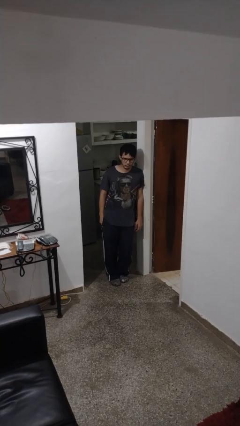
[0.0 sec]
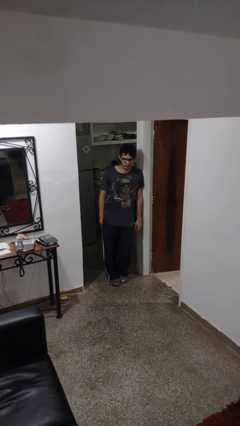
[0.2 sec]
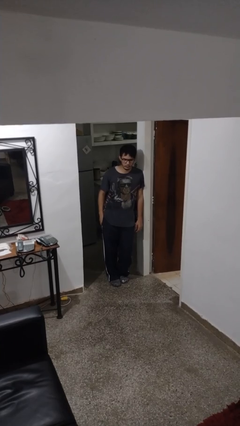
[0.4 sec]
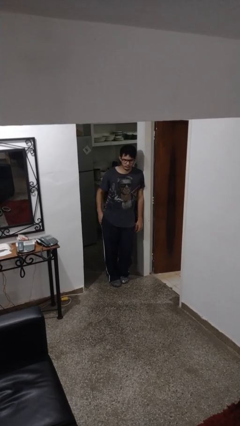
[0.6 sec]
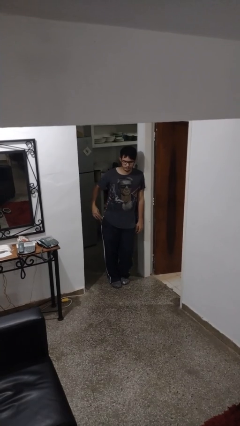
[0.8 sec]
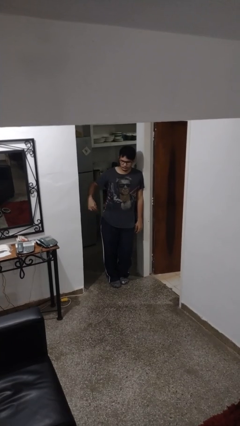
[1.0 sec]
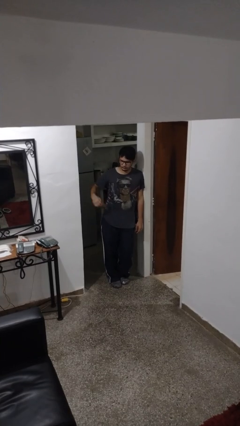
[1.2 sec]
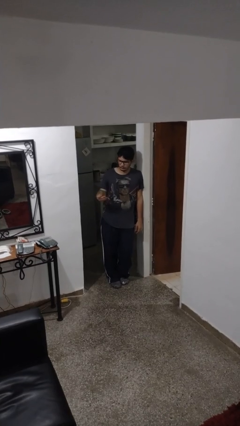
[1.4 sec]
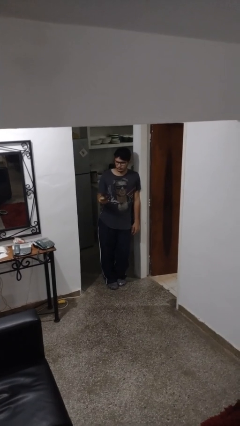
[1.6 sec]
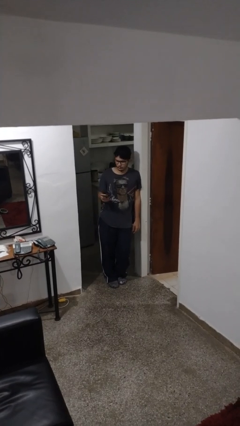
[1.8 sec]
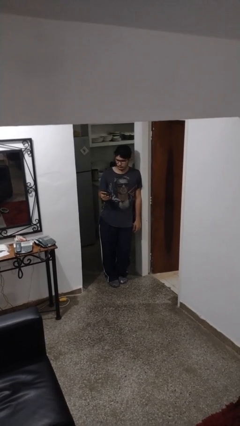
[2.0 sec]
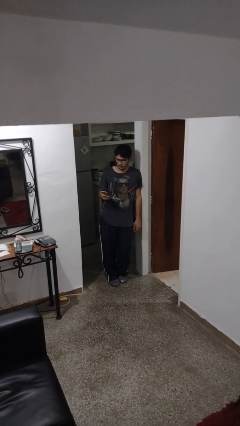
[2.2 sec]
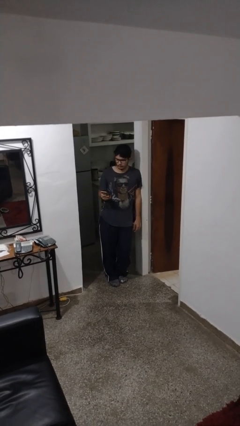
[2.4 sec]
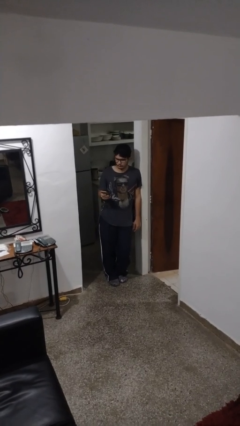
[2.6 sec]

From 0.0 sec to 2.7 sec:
person takes phone from pocket

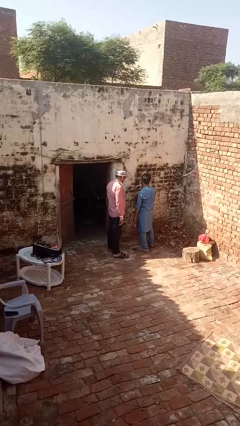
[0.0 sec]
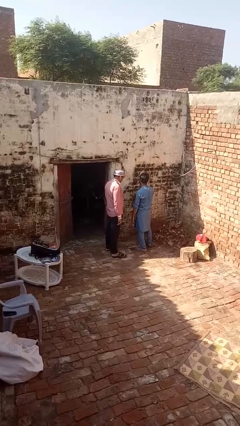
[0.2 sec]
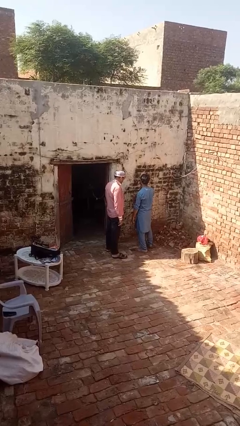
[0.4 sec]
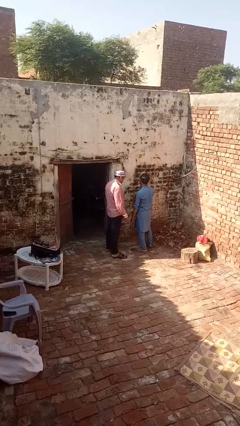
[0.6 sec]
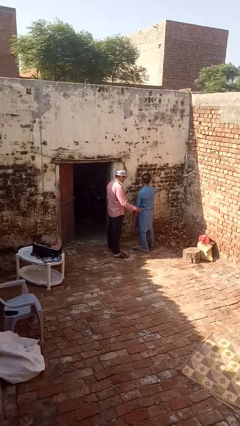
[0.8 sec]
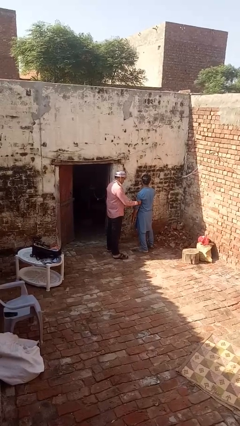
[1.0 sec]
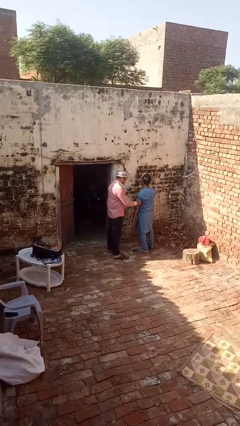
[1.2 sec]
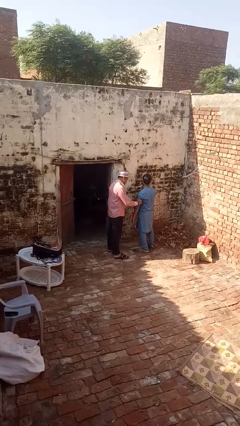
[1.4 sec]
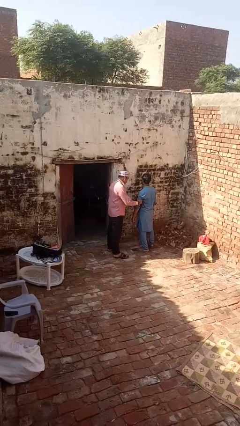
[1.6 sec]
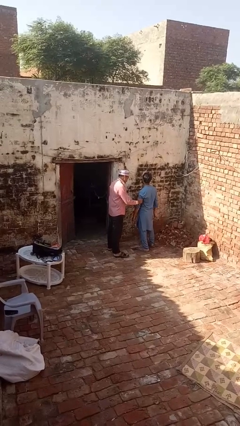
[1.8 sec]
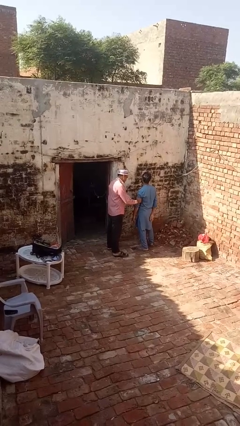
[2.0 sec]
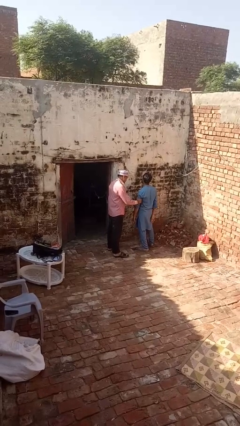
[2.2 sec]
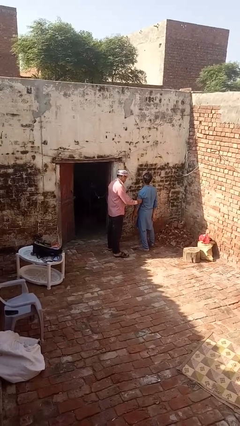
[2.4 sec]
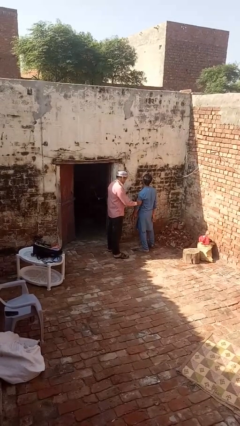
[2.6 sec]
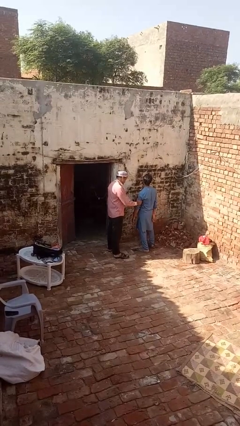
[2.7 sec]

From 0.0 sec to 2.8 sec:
person grabs person by bicep

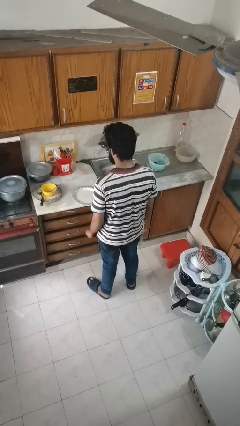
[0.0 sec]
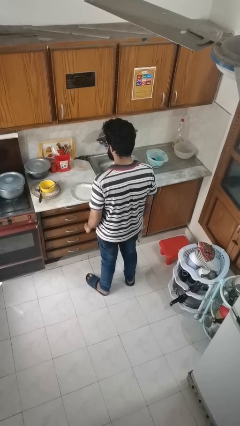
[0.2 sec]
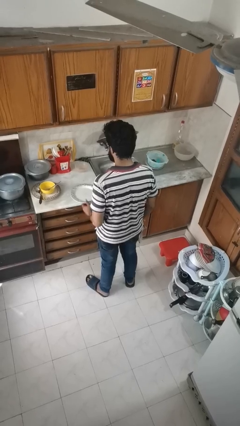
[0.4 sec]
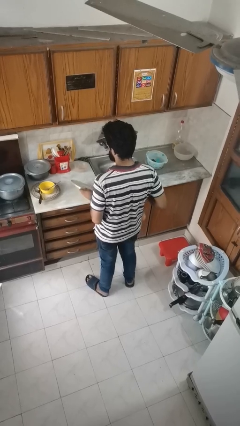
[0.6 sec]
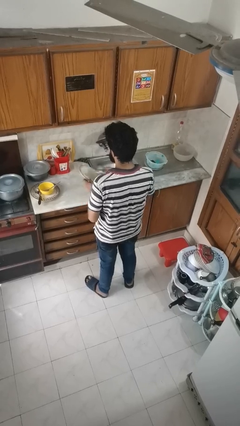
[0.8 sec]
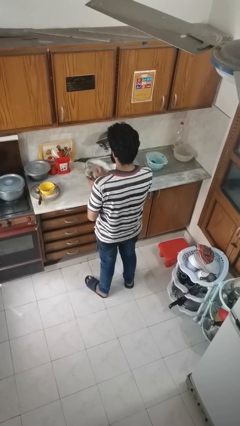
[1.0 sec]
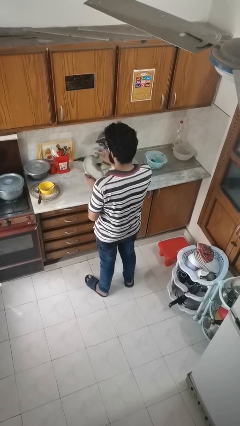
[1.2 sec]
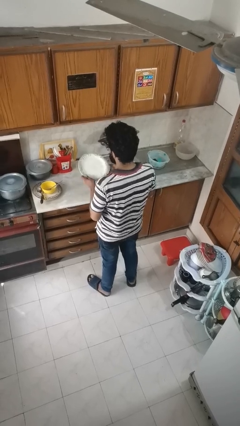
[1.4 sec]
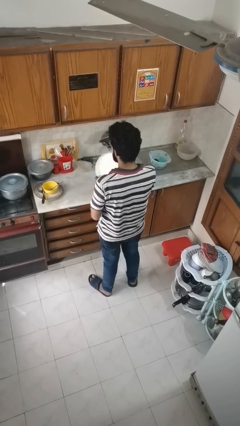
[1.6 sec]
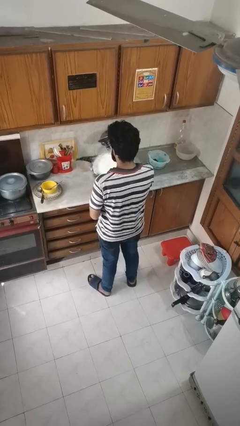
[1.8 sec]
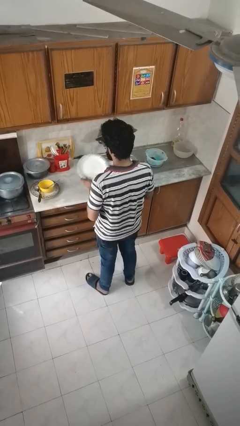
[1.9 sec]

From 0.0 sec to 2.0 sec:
person dries dish

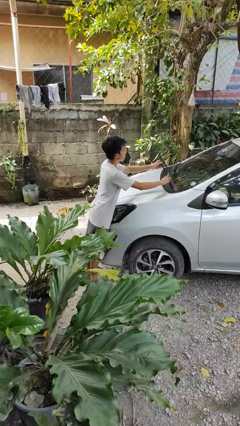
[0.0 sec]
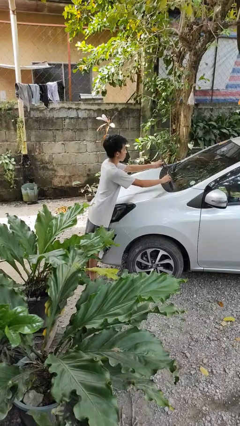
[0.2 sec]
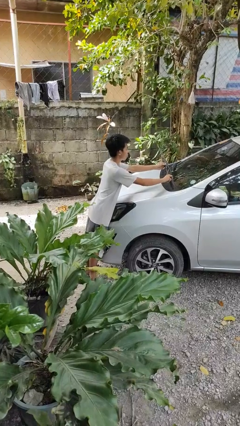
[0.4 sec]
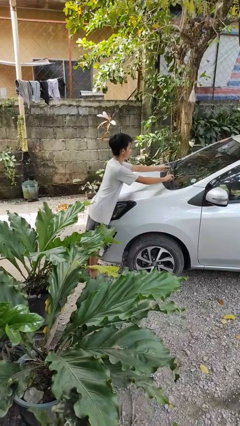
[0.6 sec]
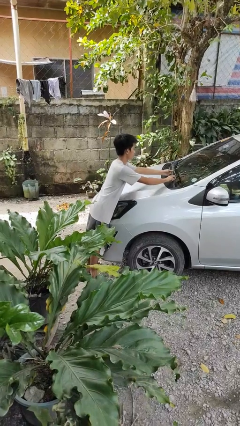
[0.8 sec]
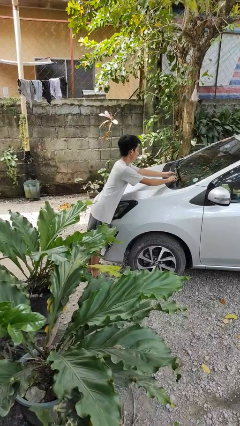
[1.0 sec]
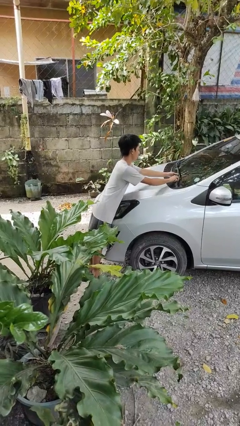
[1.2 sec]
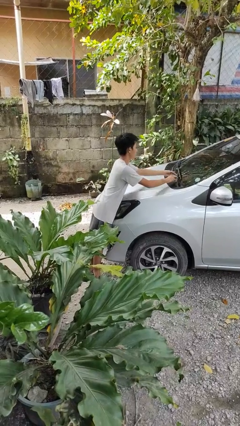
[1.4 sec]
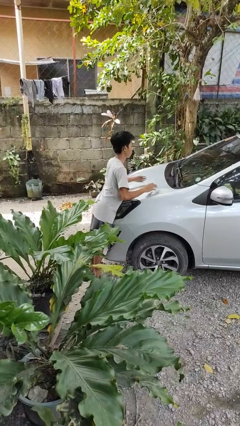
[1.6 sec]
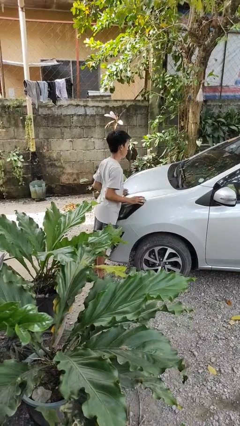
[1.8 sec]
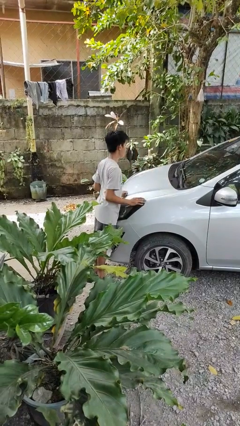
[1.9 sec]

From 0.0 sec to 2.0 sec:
person flips down car wipers

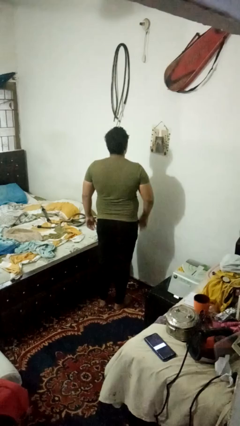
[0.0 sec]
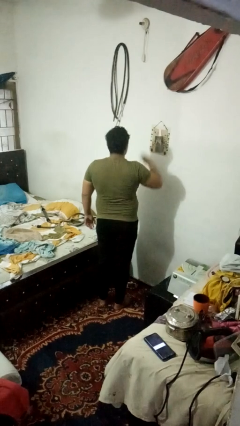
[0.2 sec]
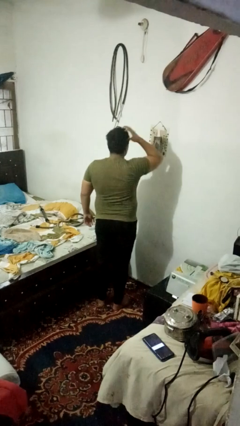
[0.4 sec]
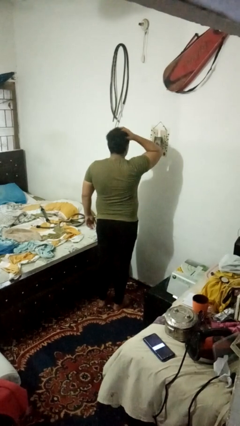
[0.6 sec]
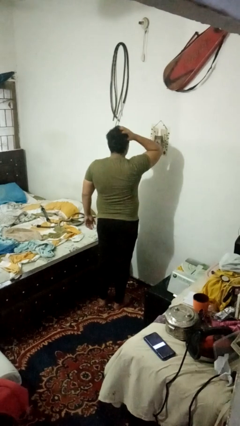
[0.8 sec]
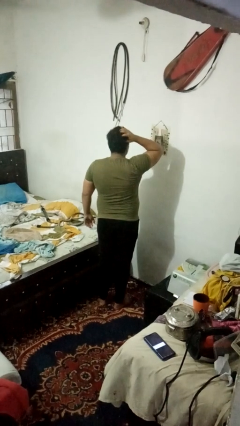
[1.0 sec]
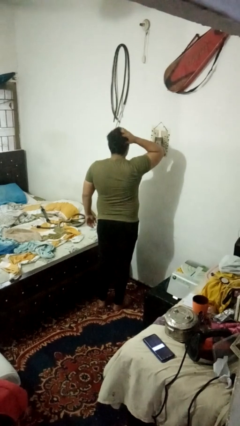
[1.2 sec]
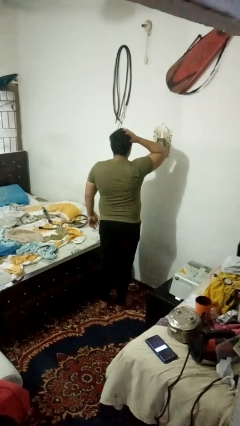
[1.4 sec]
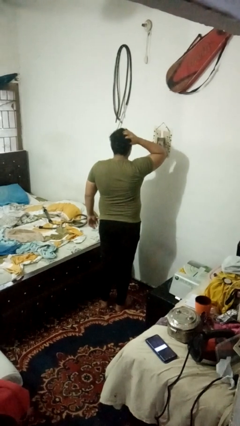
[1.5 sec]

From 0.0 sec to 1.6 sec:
person strokes hair

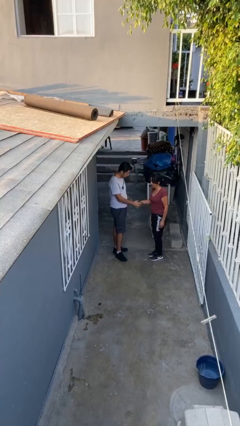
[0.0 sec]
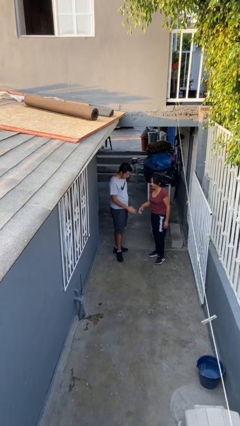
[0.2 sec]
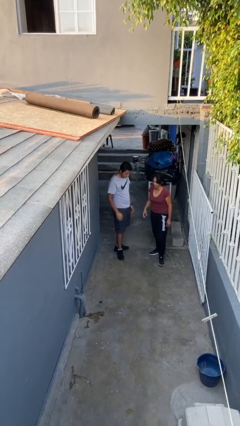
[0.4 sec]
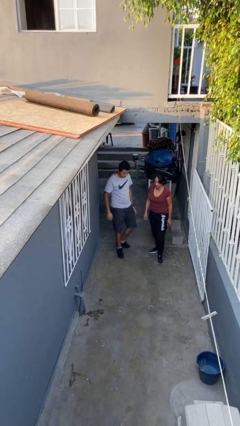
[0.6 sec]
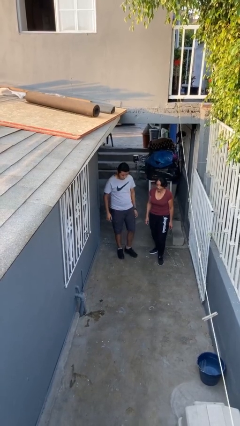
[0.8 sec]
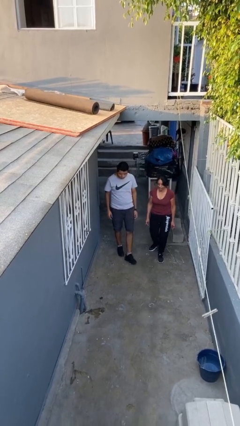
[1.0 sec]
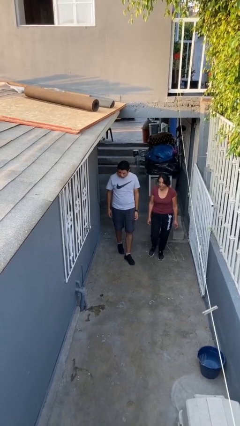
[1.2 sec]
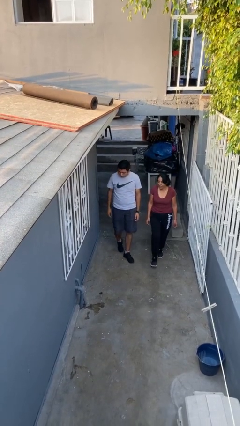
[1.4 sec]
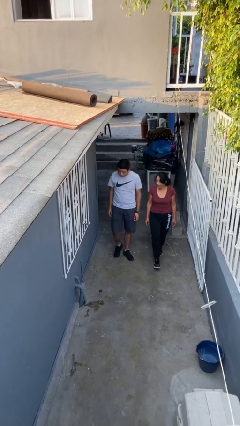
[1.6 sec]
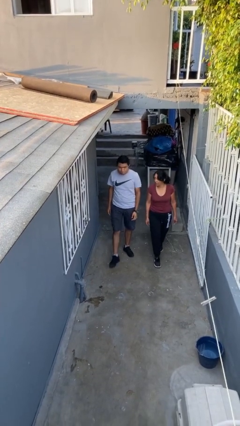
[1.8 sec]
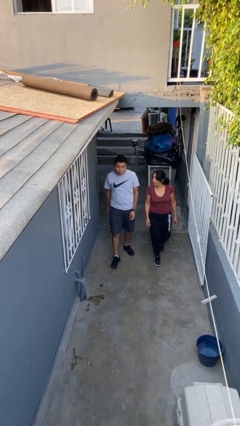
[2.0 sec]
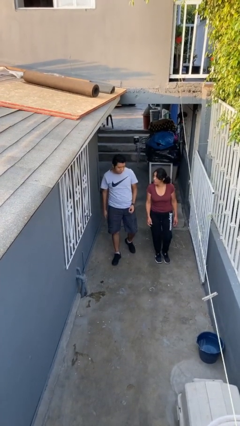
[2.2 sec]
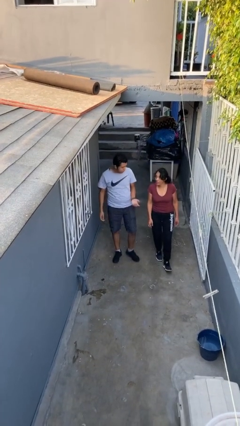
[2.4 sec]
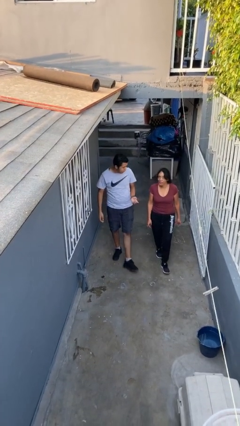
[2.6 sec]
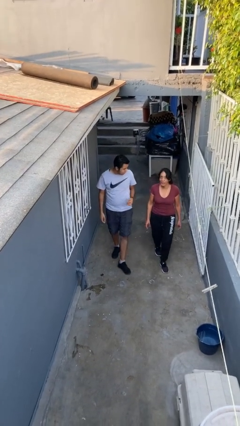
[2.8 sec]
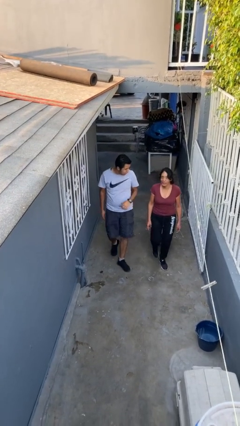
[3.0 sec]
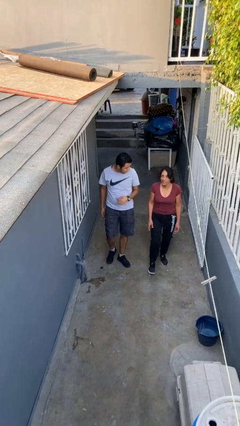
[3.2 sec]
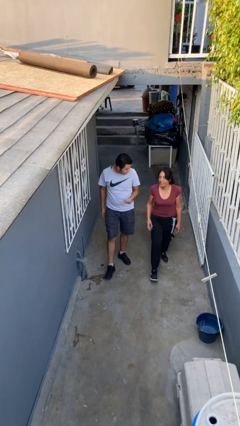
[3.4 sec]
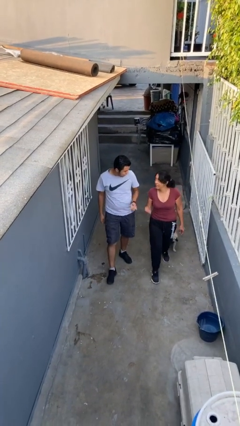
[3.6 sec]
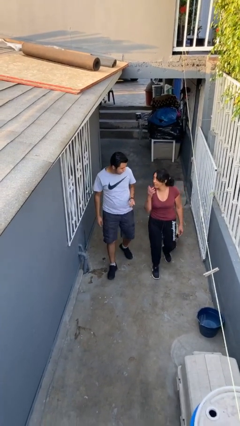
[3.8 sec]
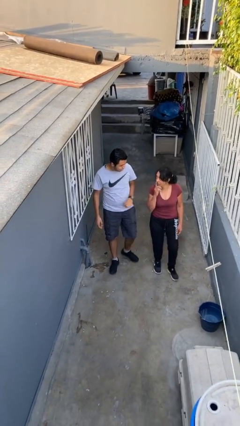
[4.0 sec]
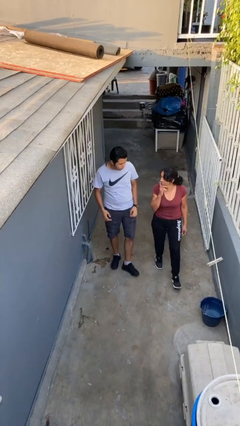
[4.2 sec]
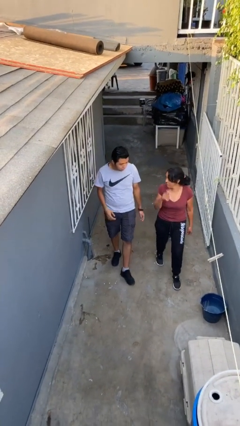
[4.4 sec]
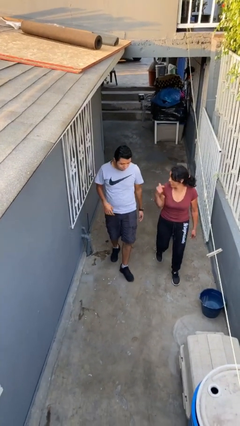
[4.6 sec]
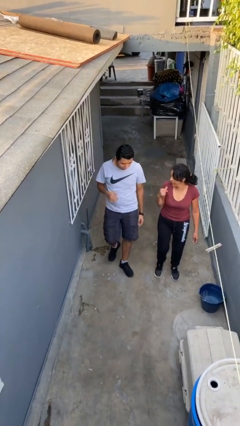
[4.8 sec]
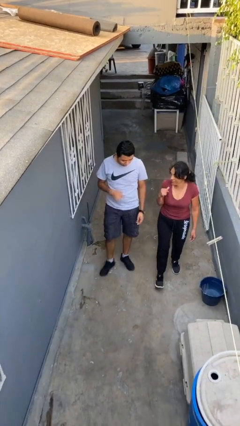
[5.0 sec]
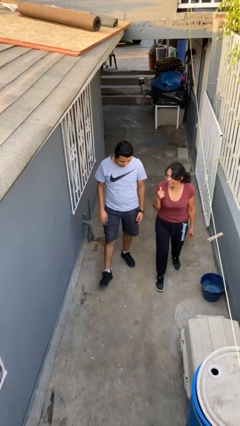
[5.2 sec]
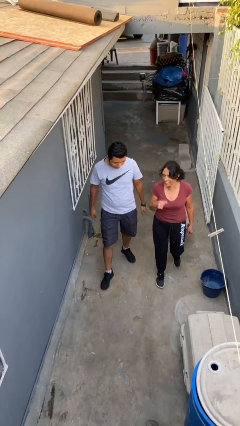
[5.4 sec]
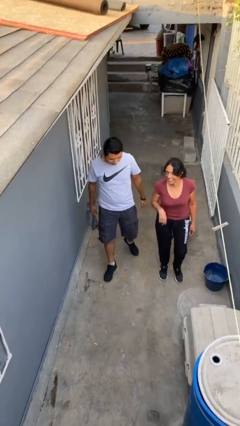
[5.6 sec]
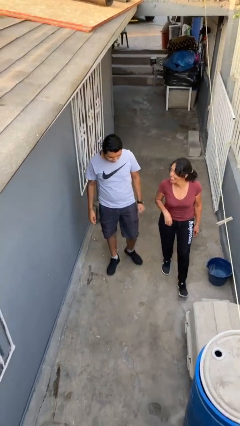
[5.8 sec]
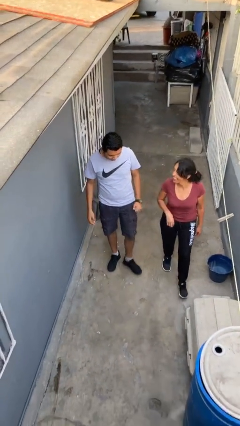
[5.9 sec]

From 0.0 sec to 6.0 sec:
person talks to person

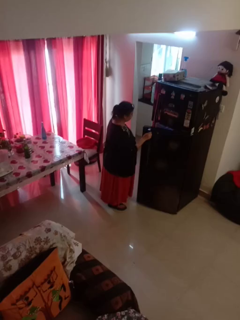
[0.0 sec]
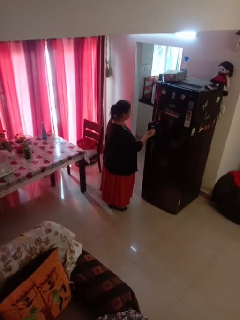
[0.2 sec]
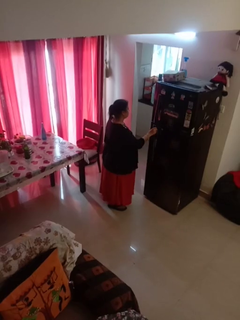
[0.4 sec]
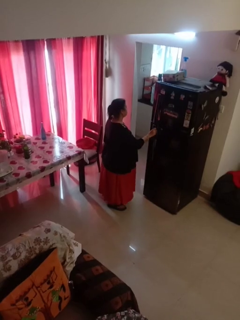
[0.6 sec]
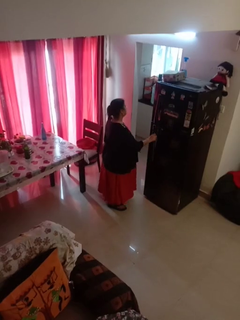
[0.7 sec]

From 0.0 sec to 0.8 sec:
person closes refrigerator
